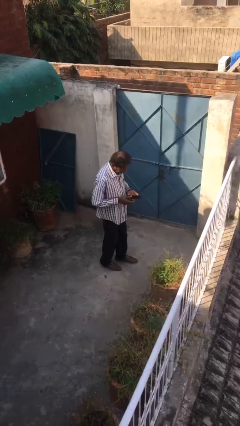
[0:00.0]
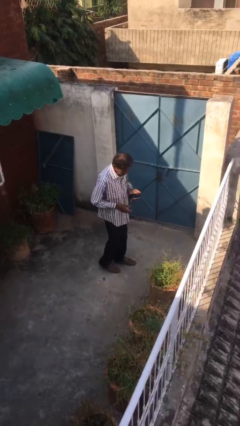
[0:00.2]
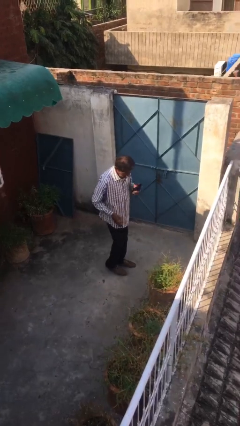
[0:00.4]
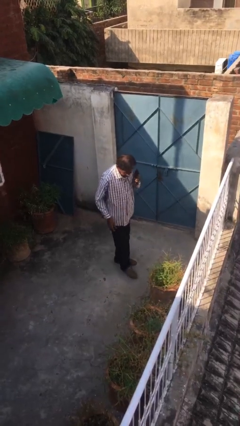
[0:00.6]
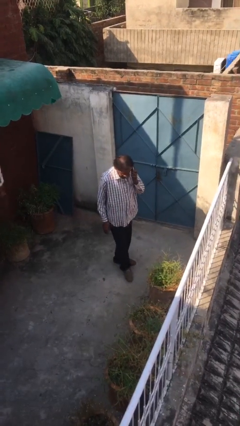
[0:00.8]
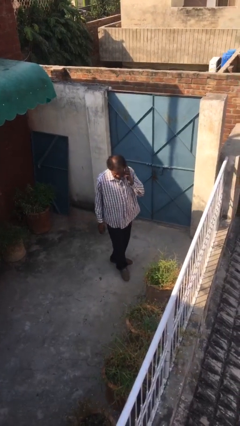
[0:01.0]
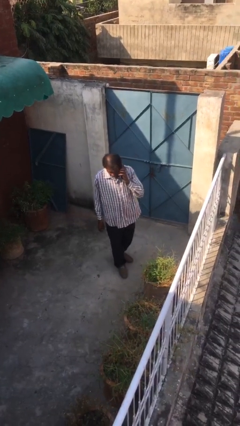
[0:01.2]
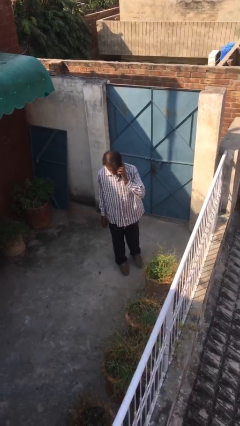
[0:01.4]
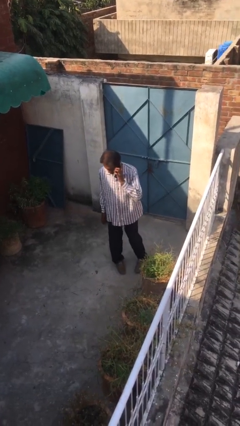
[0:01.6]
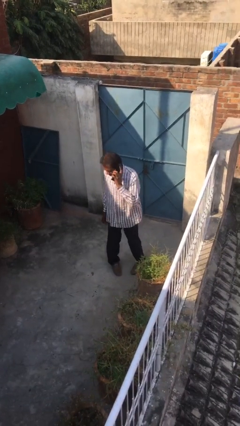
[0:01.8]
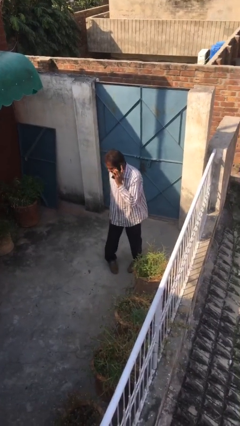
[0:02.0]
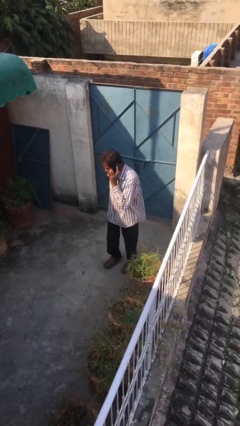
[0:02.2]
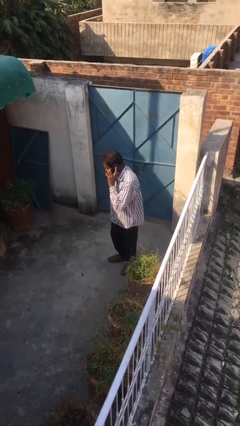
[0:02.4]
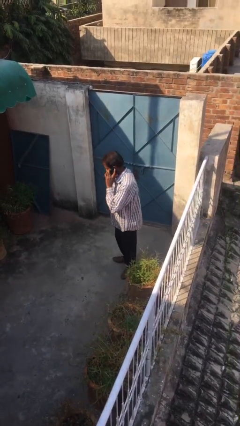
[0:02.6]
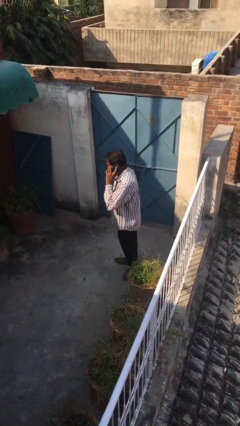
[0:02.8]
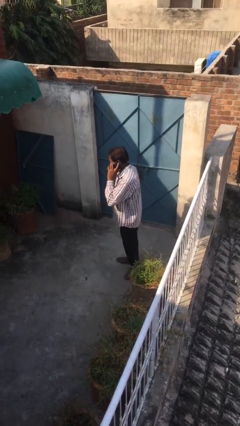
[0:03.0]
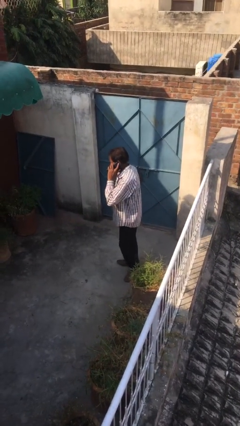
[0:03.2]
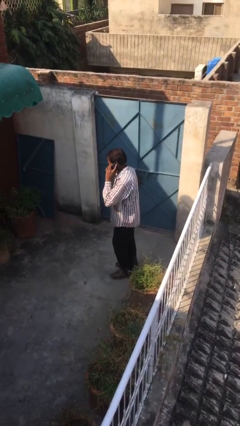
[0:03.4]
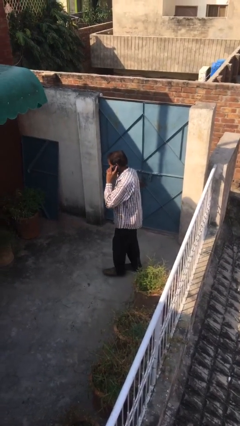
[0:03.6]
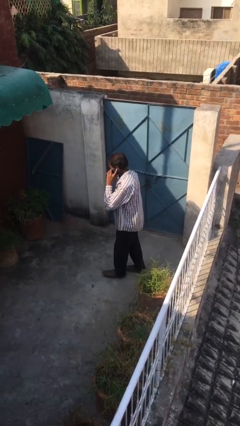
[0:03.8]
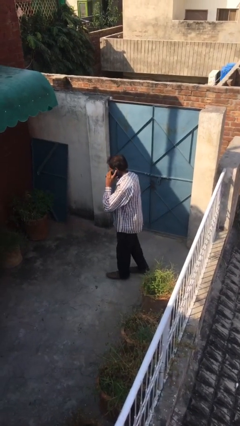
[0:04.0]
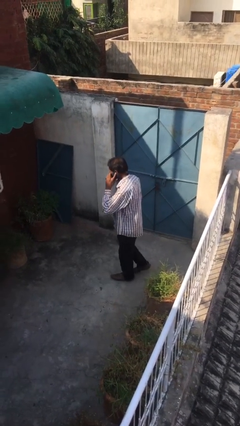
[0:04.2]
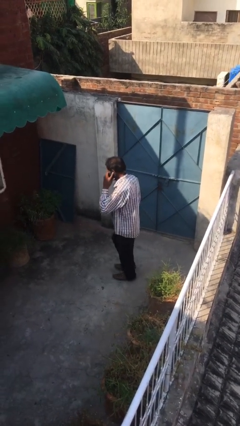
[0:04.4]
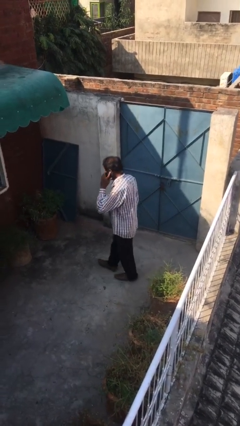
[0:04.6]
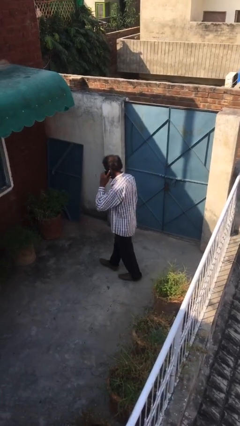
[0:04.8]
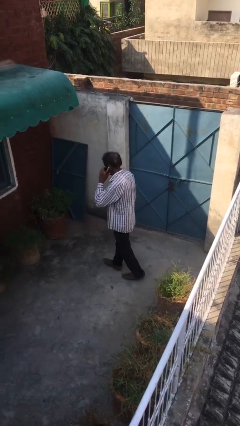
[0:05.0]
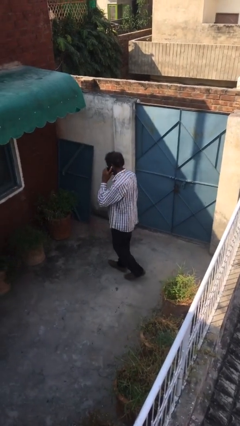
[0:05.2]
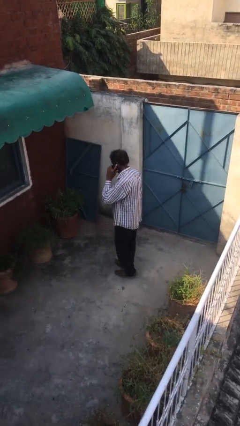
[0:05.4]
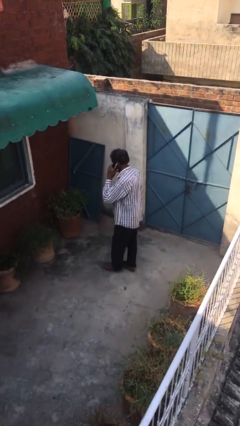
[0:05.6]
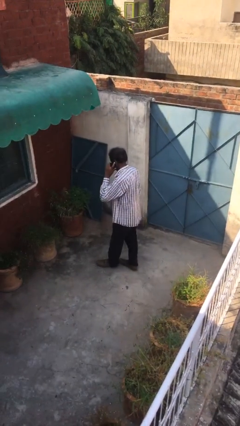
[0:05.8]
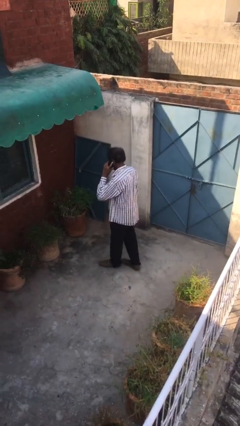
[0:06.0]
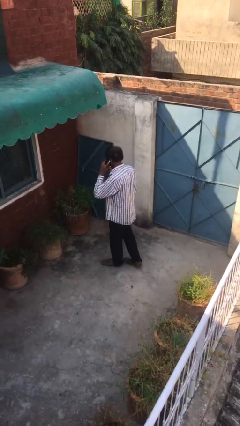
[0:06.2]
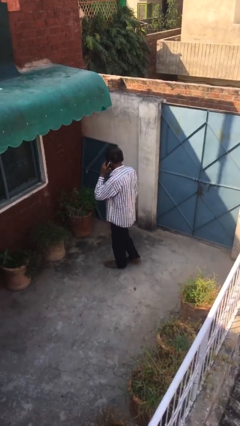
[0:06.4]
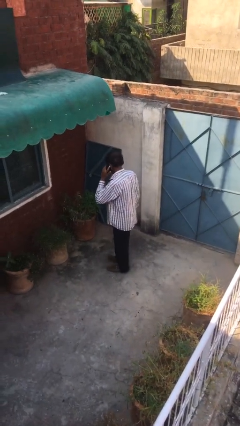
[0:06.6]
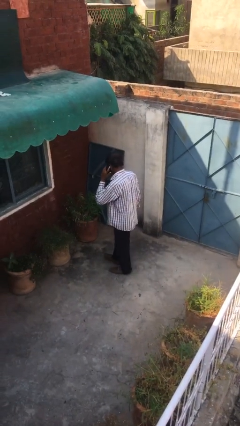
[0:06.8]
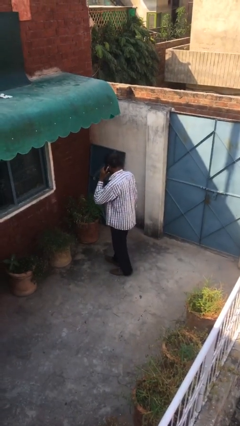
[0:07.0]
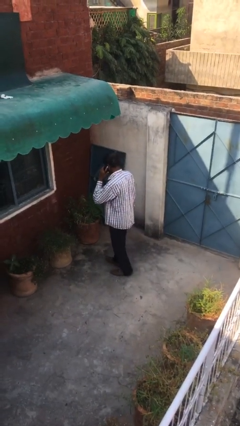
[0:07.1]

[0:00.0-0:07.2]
person talks on phone

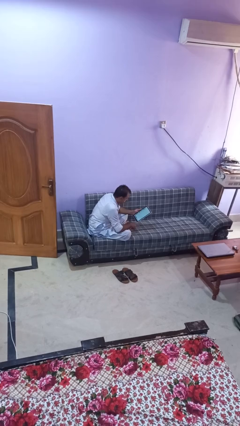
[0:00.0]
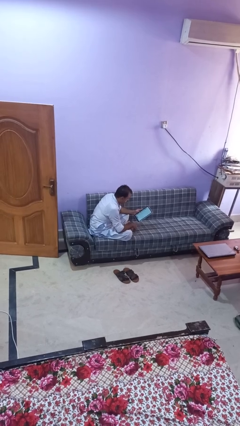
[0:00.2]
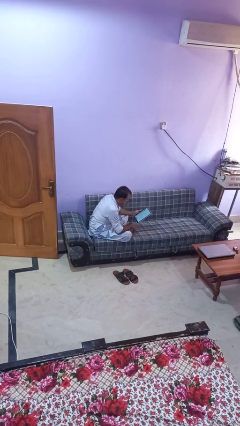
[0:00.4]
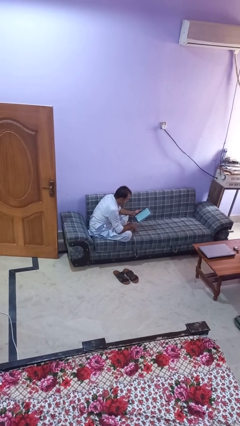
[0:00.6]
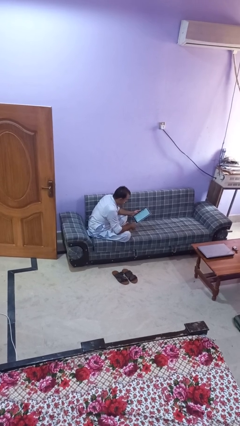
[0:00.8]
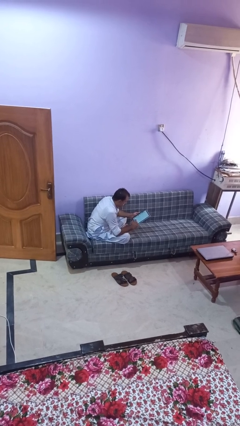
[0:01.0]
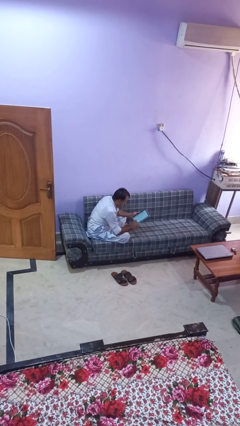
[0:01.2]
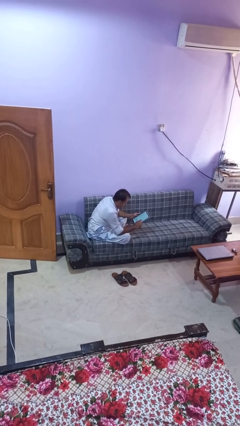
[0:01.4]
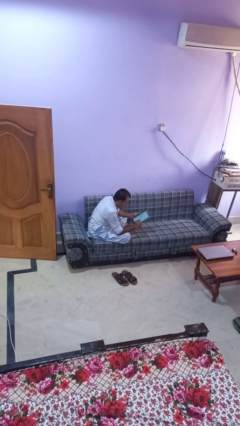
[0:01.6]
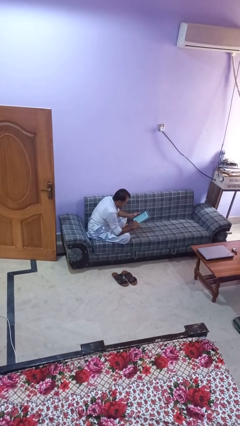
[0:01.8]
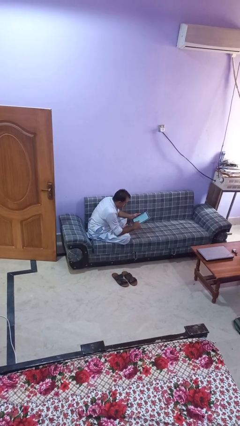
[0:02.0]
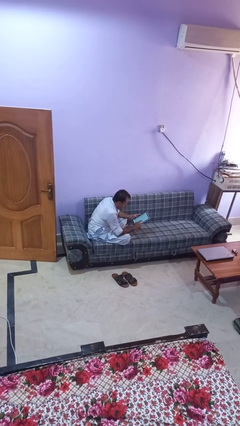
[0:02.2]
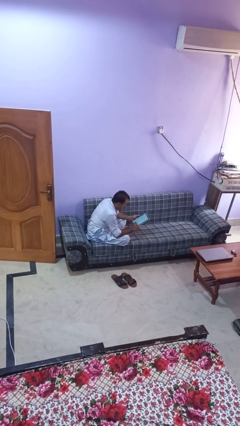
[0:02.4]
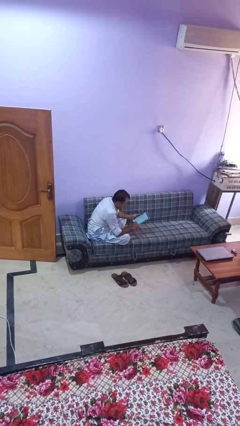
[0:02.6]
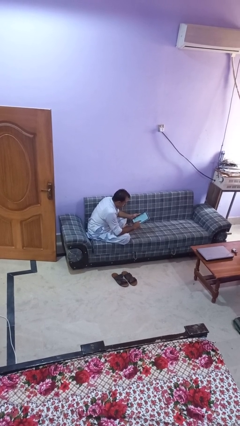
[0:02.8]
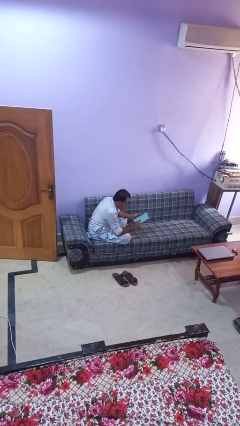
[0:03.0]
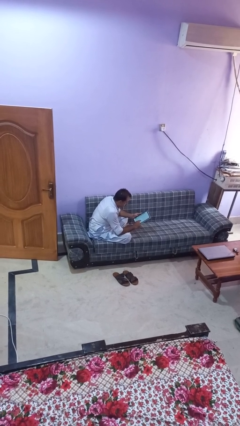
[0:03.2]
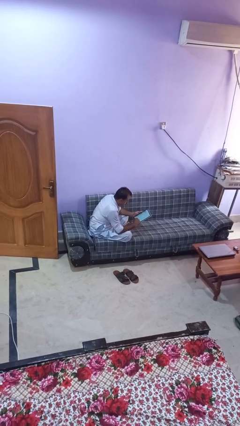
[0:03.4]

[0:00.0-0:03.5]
person interacts with tablet

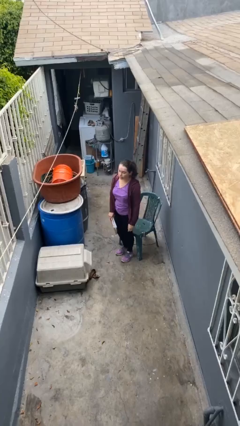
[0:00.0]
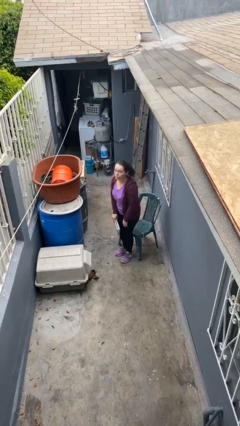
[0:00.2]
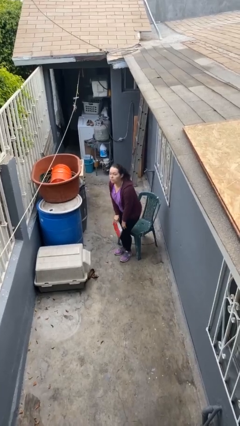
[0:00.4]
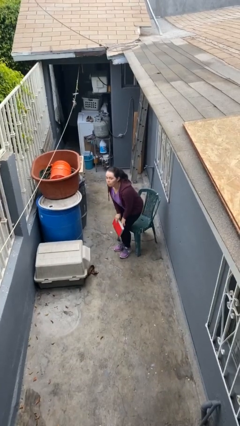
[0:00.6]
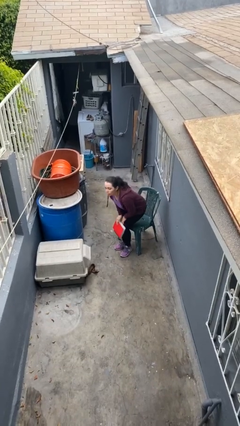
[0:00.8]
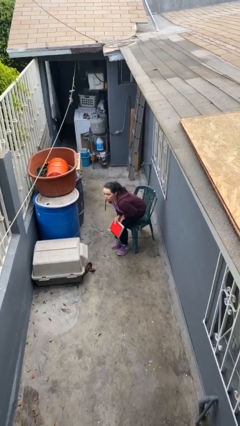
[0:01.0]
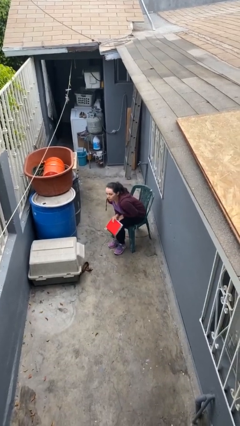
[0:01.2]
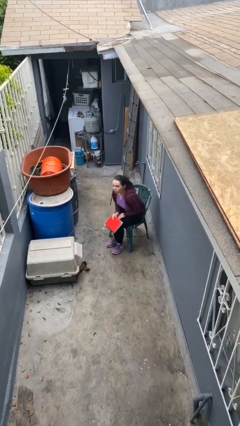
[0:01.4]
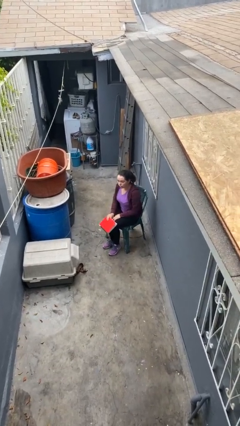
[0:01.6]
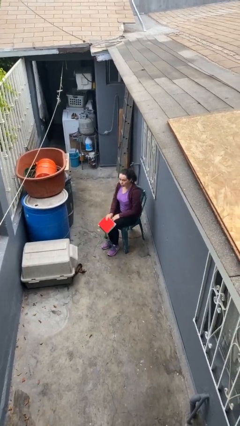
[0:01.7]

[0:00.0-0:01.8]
person sits down

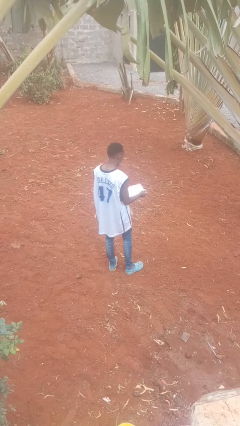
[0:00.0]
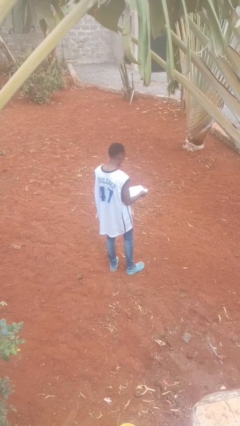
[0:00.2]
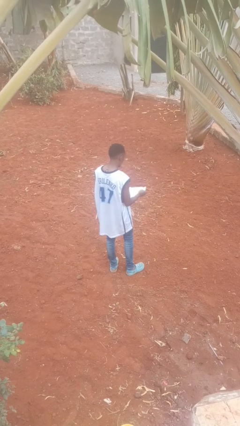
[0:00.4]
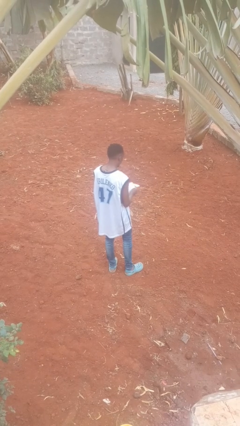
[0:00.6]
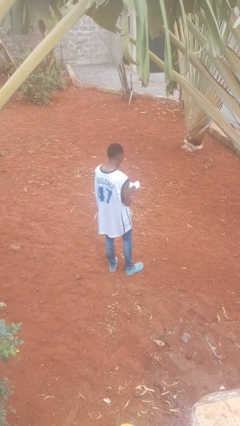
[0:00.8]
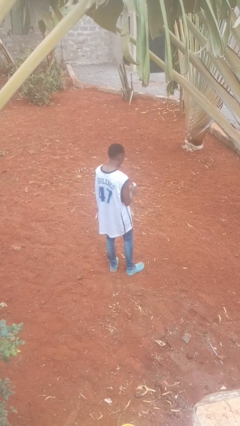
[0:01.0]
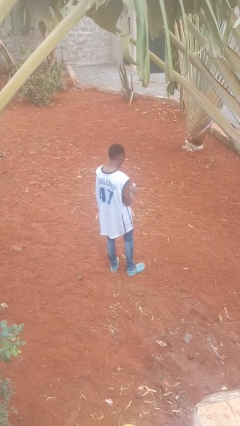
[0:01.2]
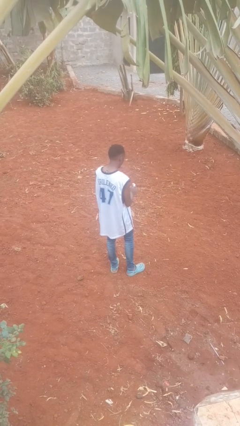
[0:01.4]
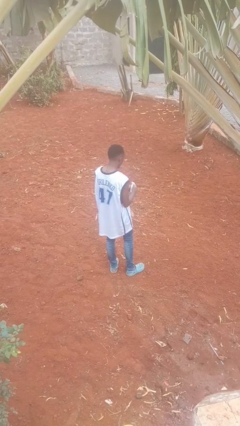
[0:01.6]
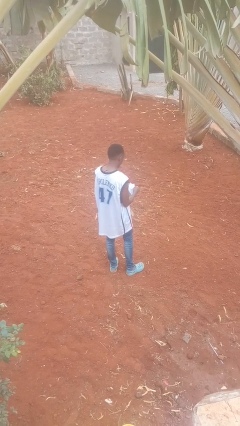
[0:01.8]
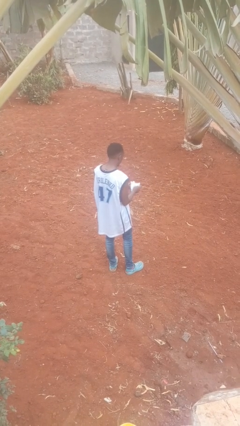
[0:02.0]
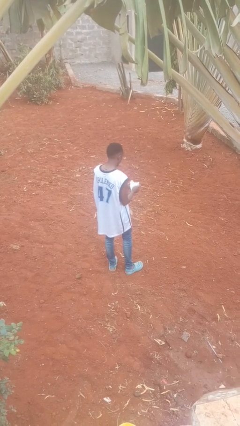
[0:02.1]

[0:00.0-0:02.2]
person crumples paper

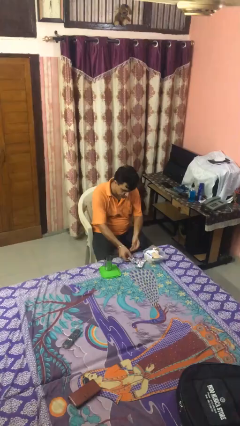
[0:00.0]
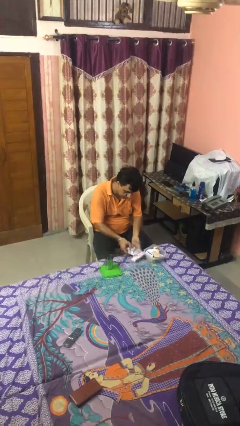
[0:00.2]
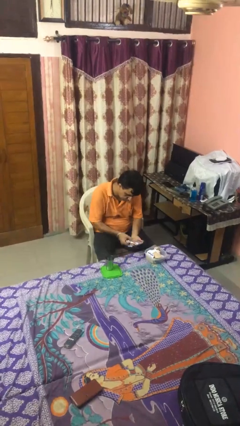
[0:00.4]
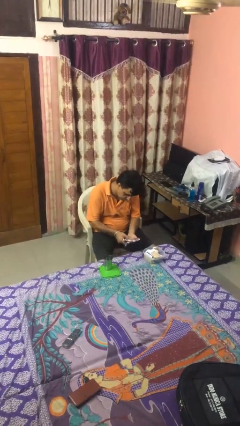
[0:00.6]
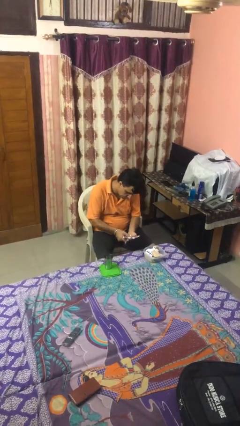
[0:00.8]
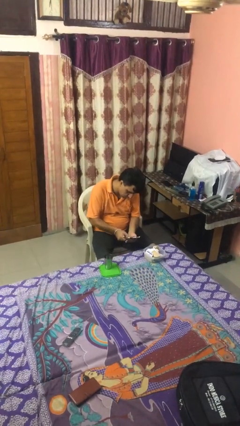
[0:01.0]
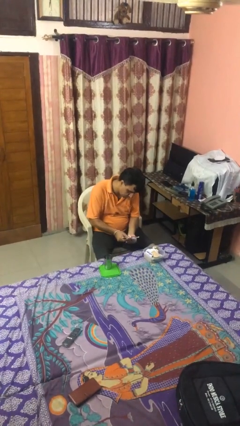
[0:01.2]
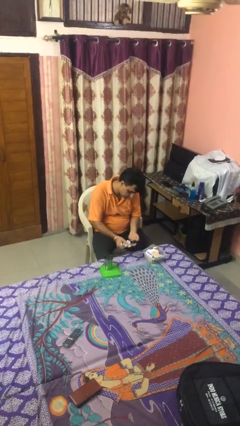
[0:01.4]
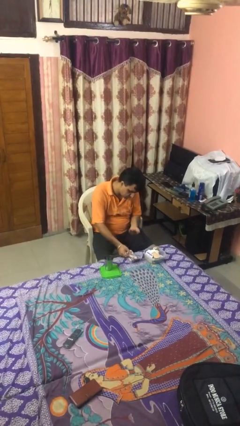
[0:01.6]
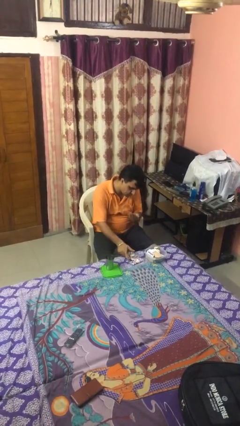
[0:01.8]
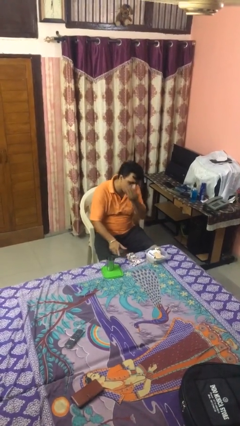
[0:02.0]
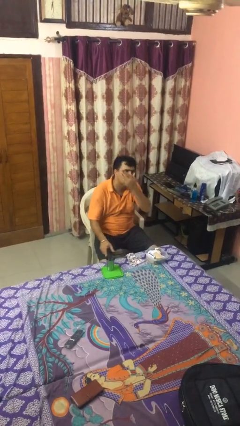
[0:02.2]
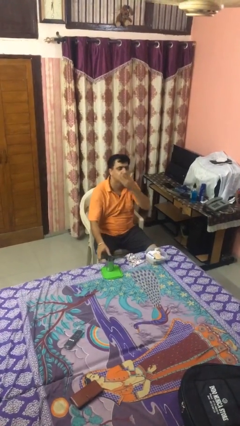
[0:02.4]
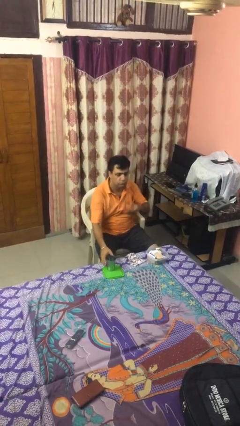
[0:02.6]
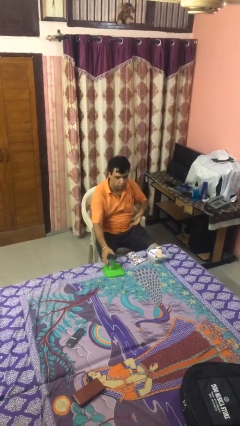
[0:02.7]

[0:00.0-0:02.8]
person takes medicine pills
